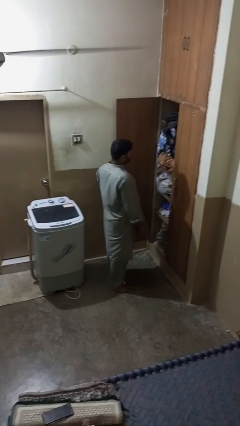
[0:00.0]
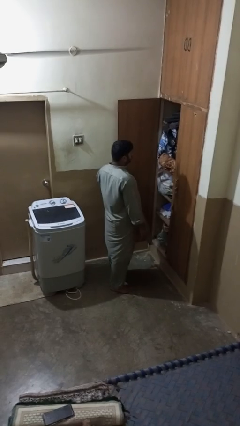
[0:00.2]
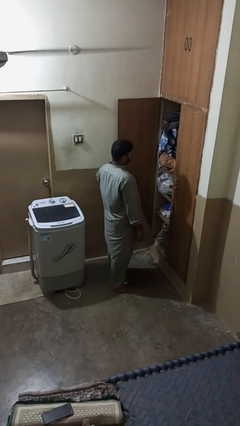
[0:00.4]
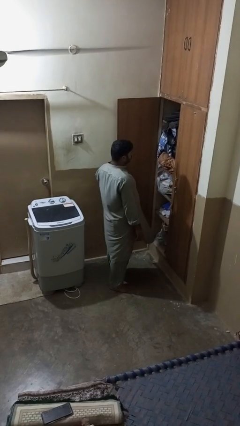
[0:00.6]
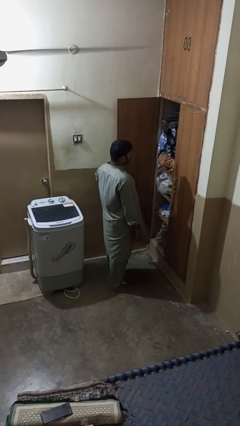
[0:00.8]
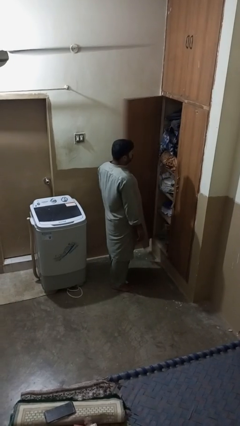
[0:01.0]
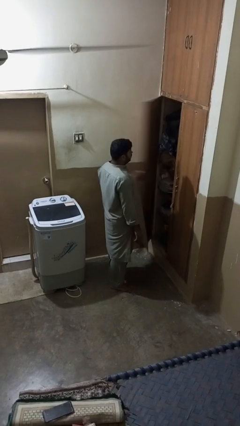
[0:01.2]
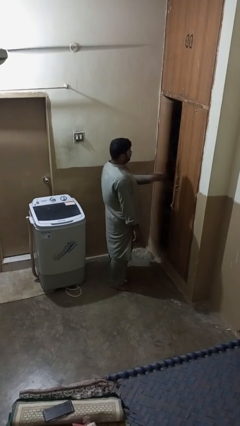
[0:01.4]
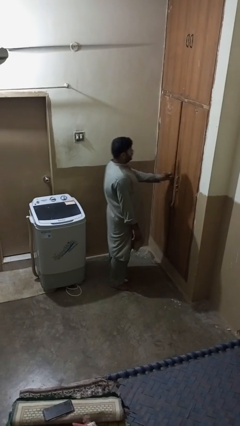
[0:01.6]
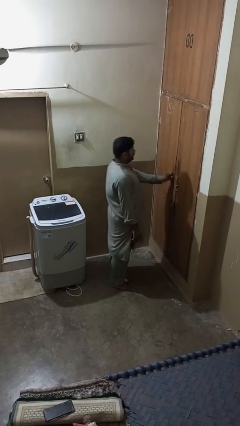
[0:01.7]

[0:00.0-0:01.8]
person closes closet door

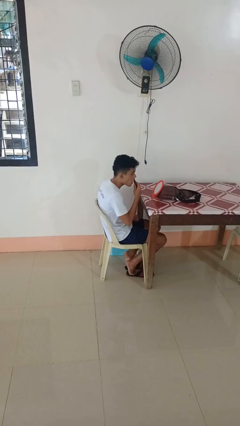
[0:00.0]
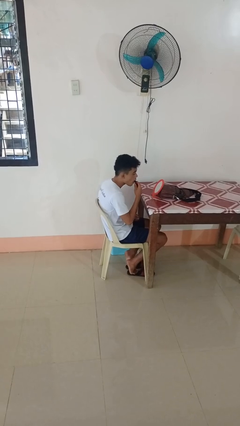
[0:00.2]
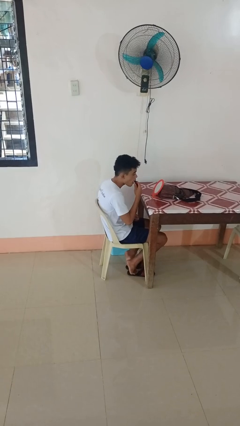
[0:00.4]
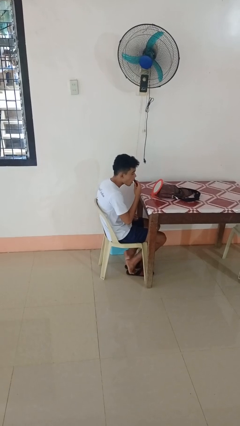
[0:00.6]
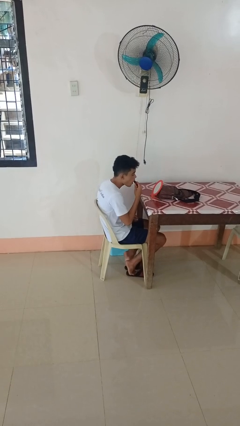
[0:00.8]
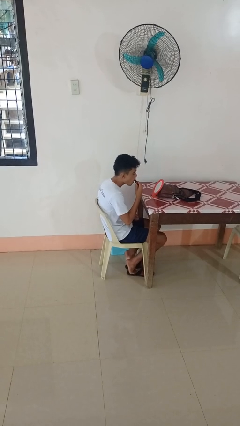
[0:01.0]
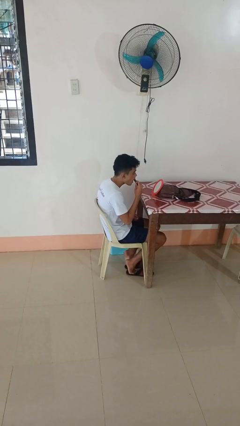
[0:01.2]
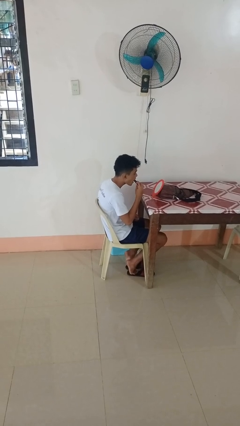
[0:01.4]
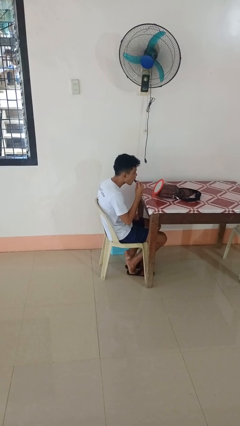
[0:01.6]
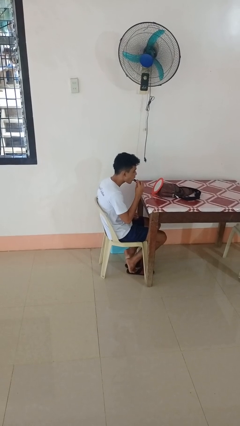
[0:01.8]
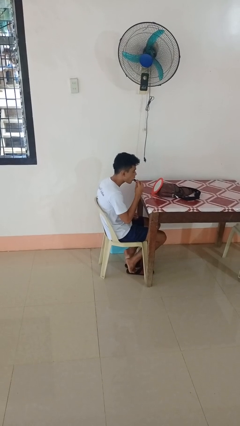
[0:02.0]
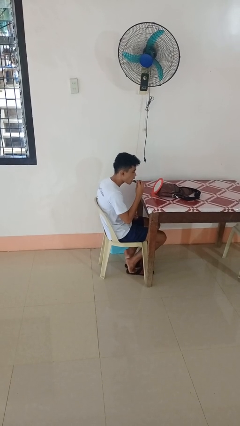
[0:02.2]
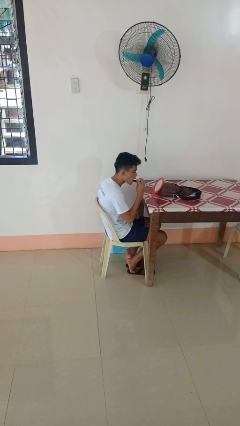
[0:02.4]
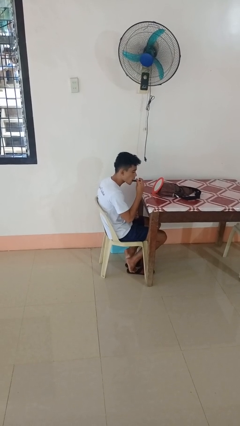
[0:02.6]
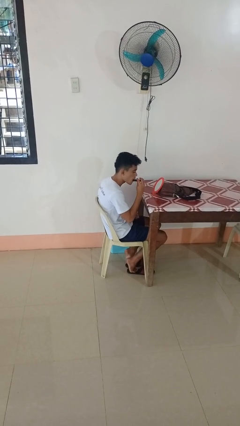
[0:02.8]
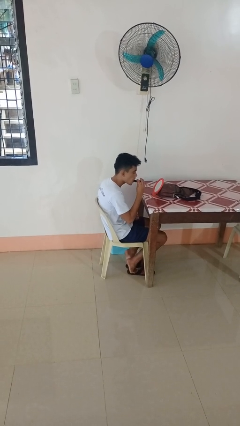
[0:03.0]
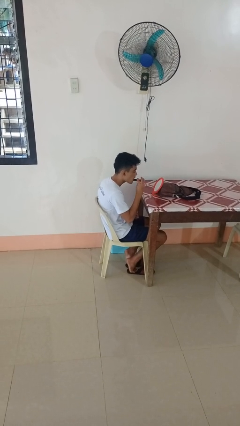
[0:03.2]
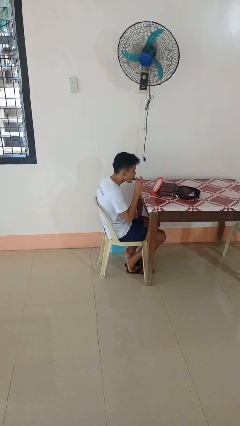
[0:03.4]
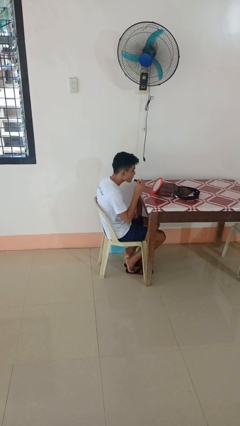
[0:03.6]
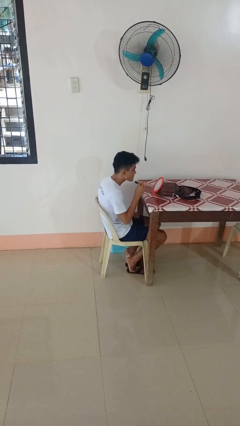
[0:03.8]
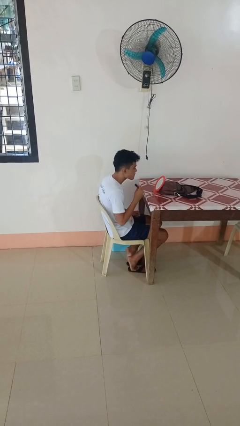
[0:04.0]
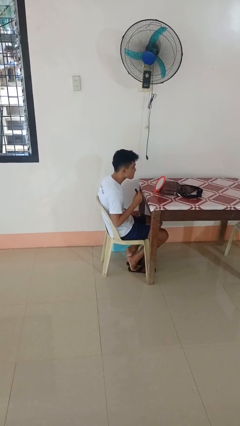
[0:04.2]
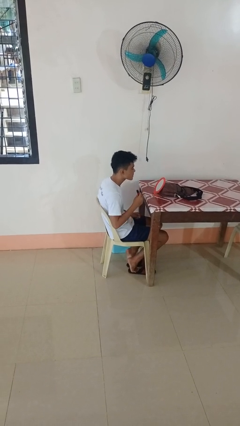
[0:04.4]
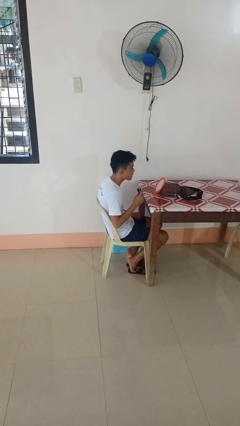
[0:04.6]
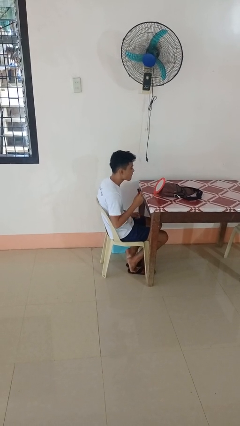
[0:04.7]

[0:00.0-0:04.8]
person applies lip makeup

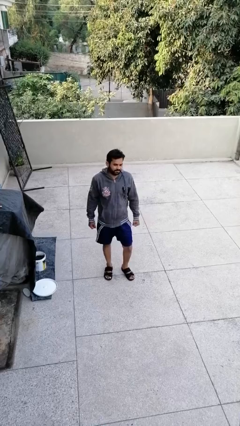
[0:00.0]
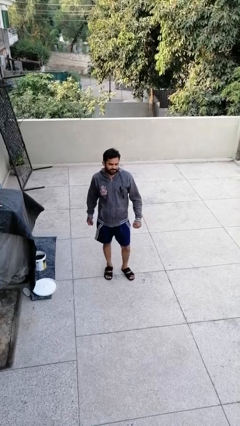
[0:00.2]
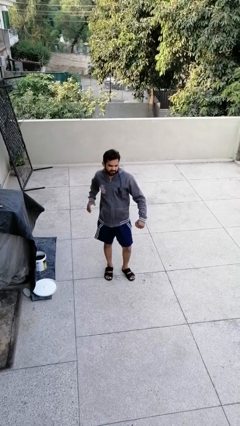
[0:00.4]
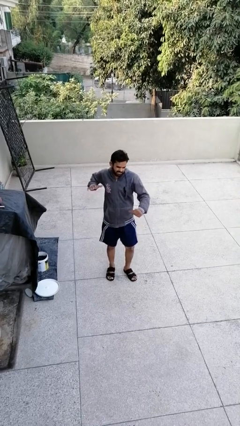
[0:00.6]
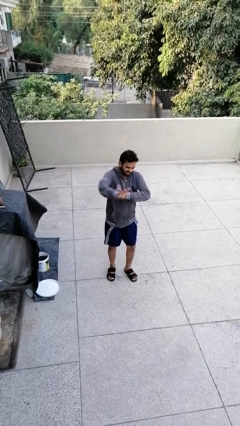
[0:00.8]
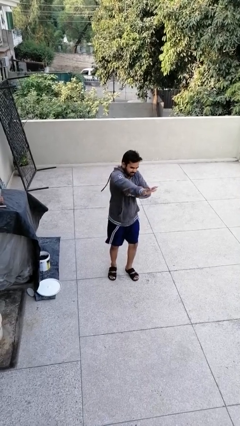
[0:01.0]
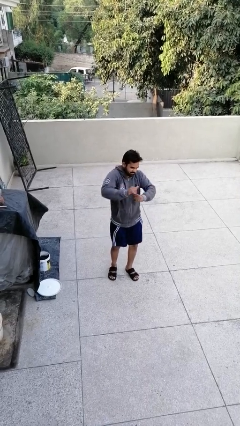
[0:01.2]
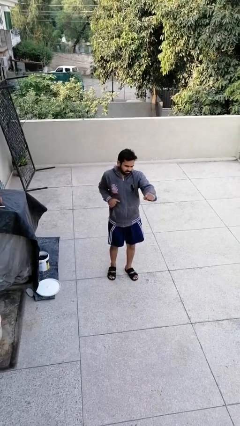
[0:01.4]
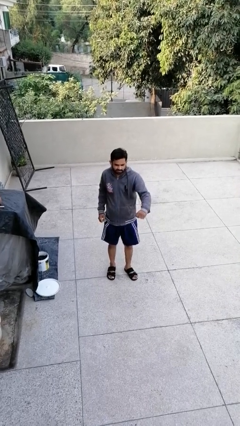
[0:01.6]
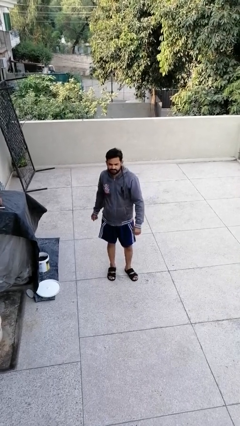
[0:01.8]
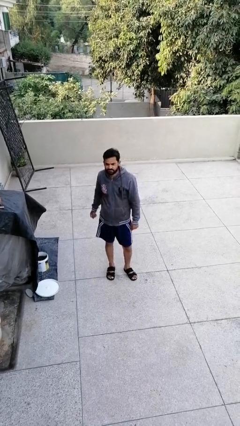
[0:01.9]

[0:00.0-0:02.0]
person karate chop

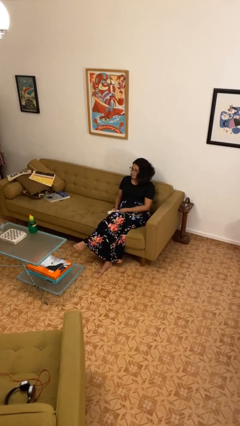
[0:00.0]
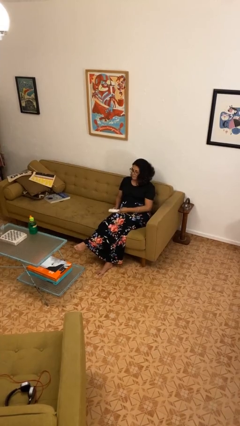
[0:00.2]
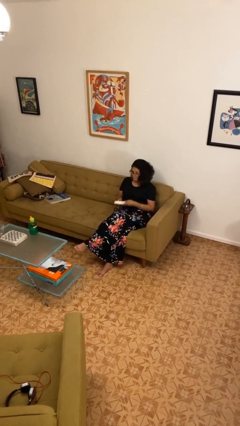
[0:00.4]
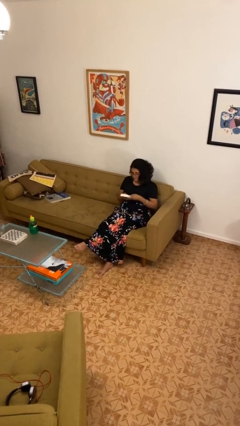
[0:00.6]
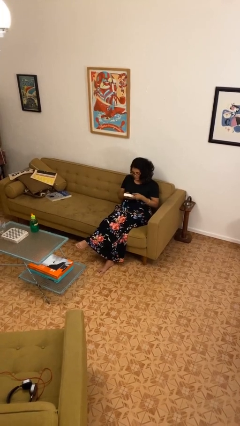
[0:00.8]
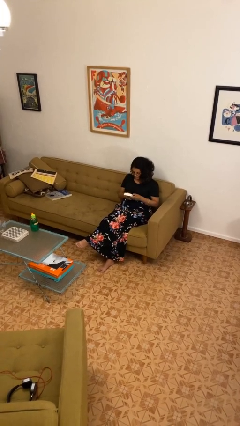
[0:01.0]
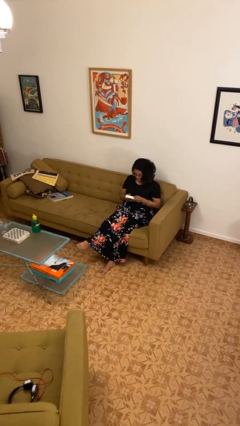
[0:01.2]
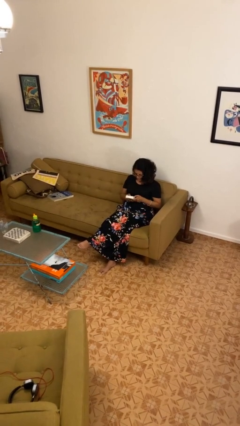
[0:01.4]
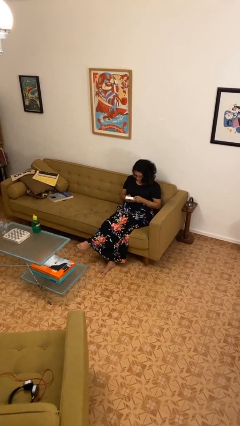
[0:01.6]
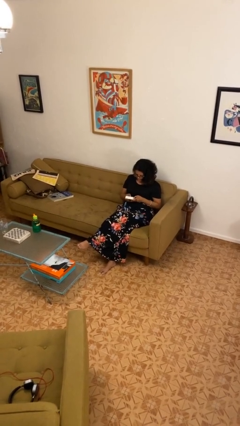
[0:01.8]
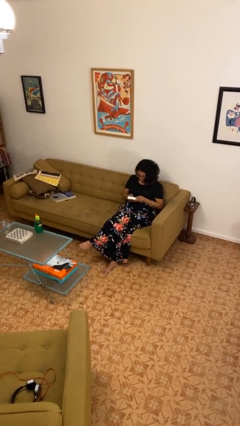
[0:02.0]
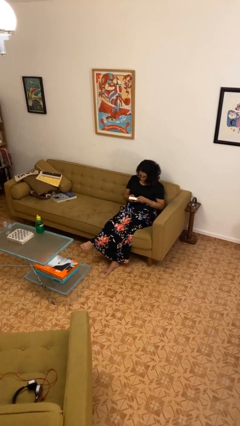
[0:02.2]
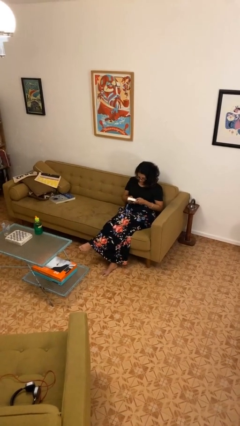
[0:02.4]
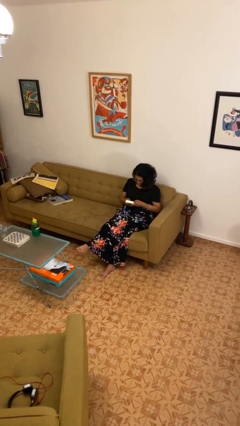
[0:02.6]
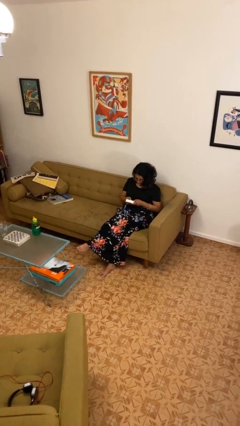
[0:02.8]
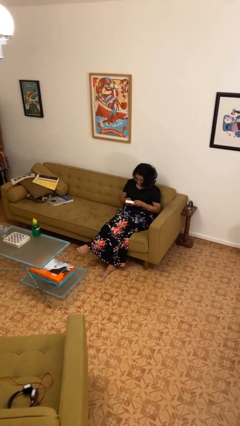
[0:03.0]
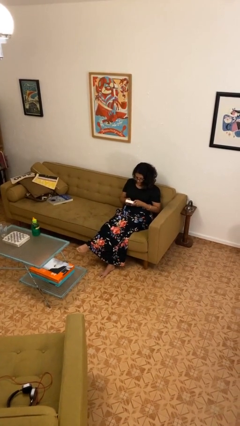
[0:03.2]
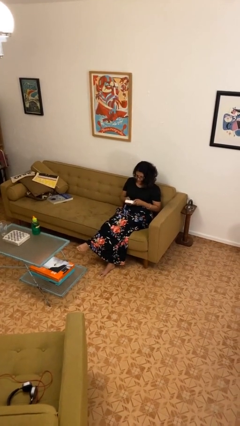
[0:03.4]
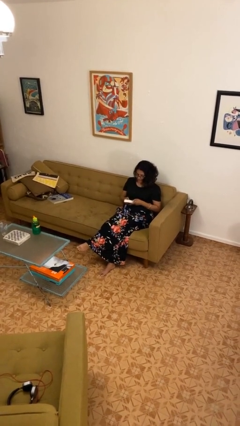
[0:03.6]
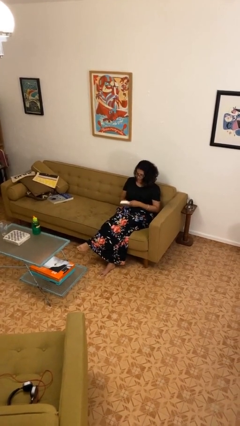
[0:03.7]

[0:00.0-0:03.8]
person interacts with handheld game

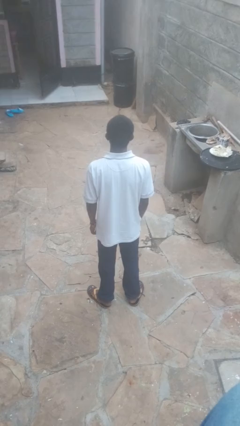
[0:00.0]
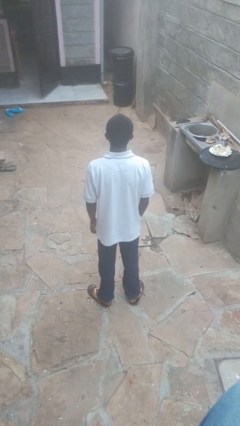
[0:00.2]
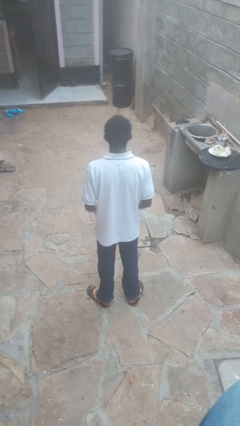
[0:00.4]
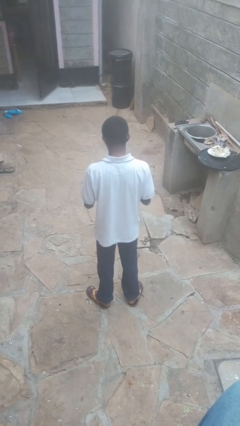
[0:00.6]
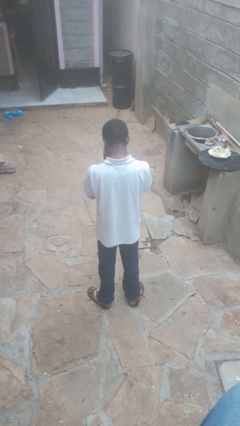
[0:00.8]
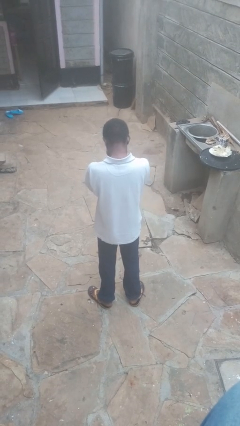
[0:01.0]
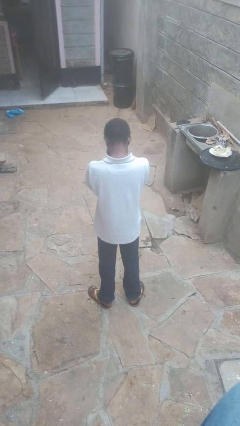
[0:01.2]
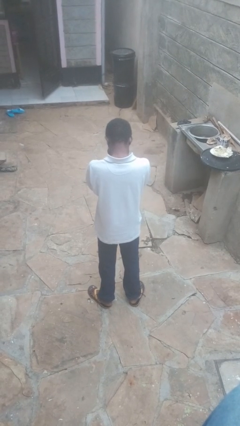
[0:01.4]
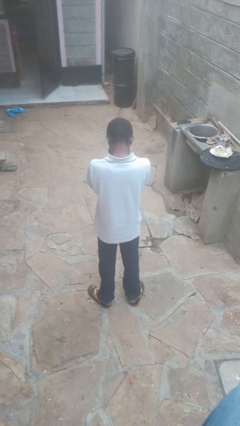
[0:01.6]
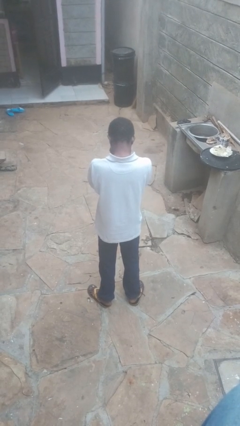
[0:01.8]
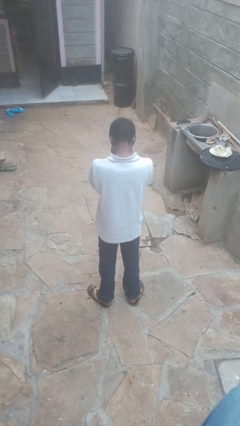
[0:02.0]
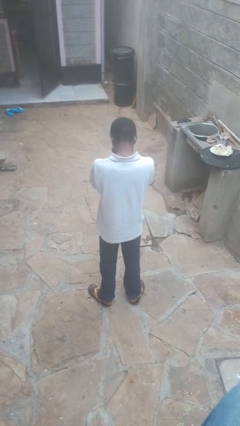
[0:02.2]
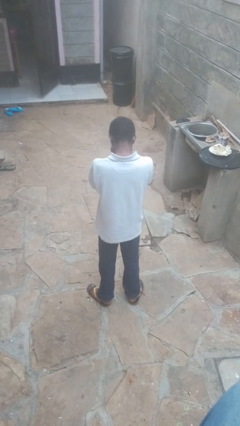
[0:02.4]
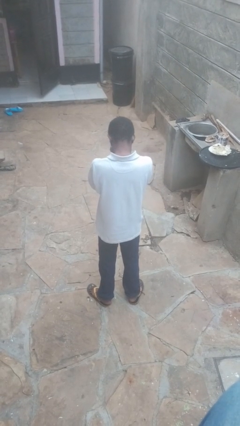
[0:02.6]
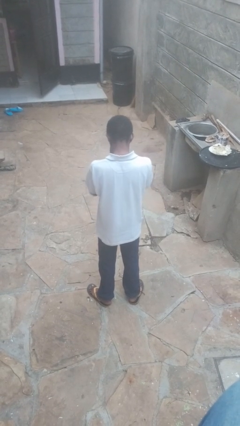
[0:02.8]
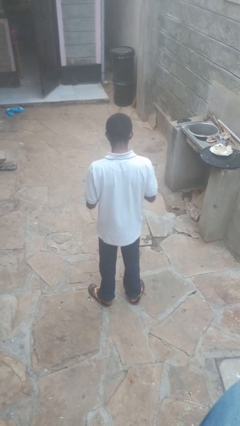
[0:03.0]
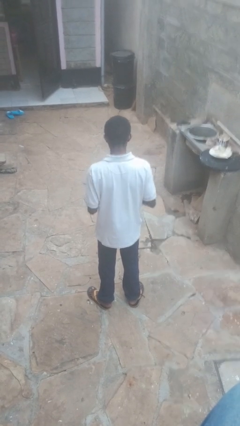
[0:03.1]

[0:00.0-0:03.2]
person covers face with hands

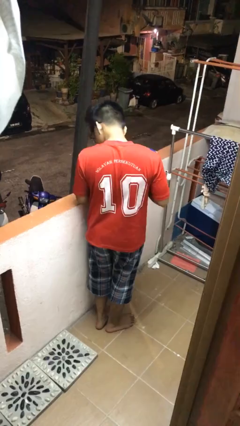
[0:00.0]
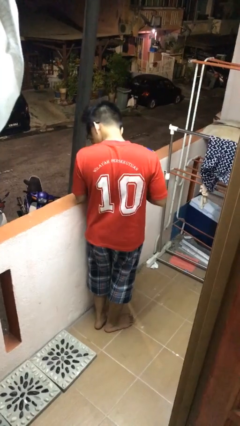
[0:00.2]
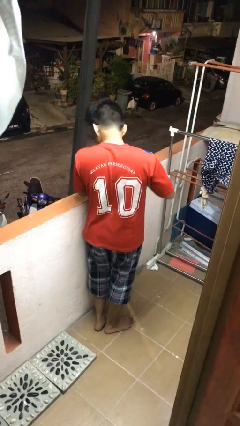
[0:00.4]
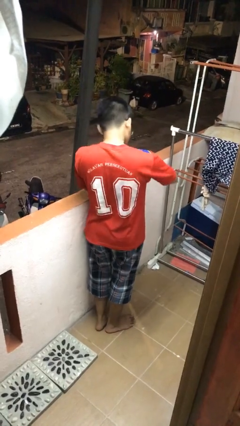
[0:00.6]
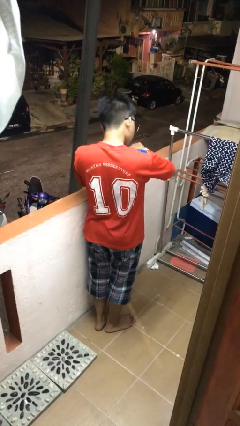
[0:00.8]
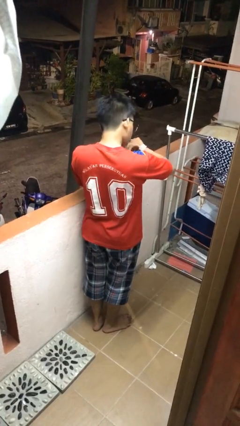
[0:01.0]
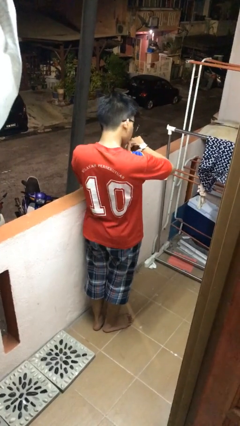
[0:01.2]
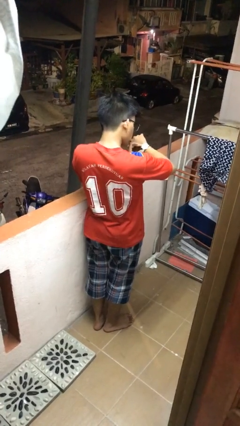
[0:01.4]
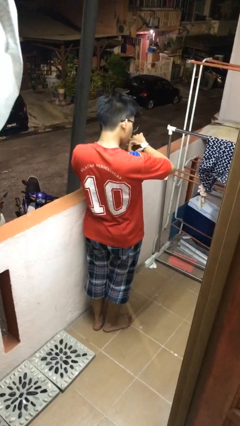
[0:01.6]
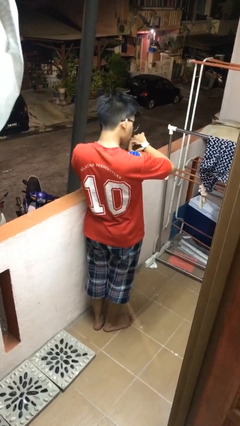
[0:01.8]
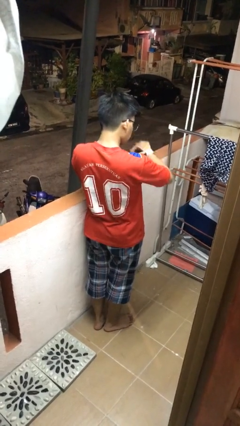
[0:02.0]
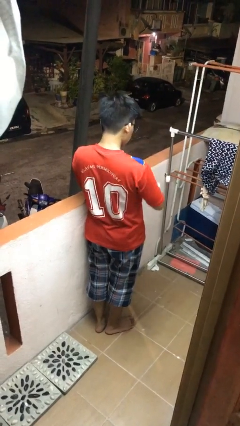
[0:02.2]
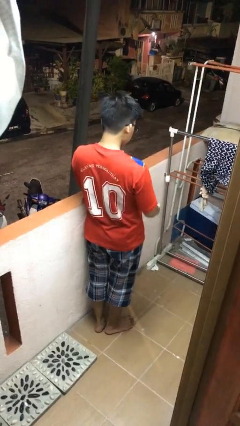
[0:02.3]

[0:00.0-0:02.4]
person looks at wristwatch
